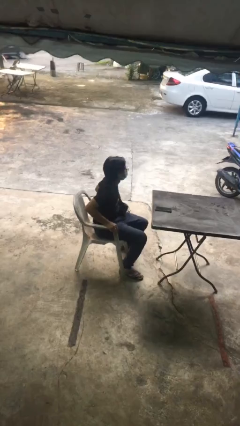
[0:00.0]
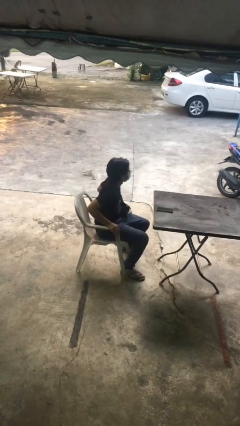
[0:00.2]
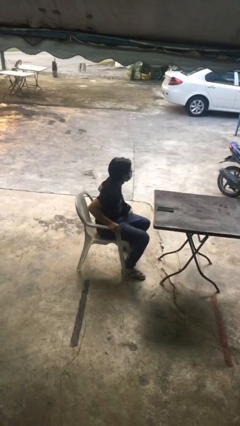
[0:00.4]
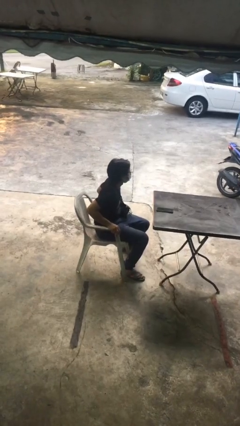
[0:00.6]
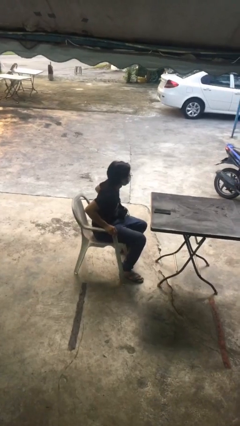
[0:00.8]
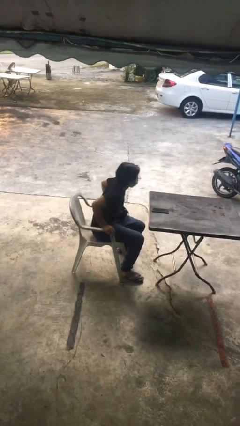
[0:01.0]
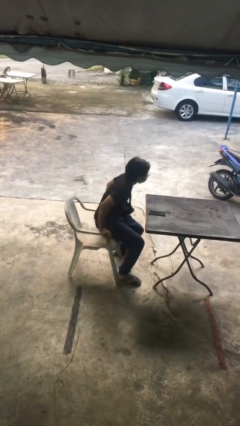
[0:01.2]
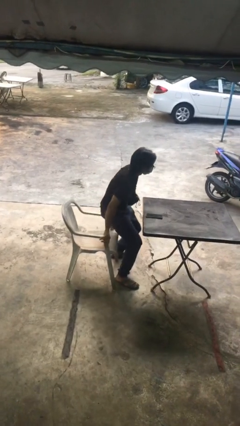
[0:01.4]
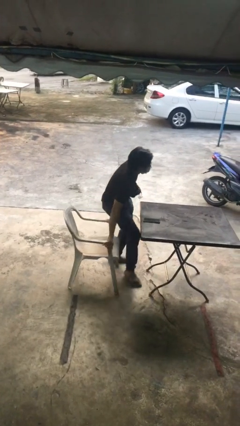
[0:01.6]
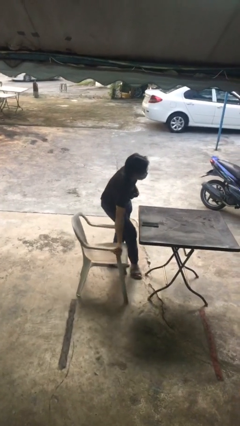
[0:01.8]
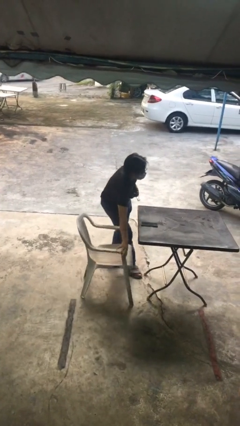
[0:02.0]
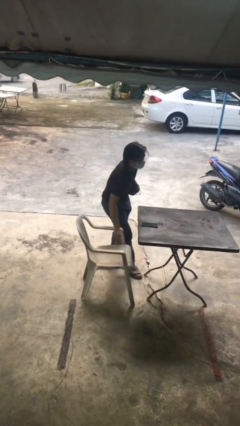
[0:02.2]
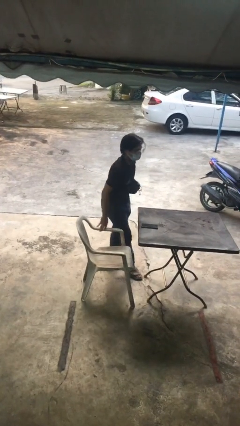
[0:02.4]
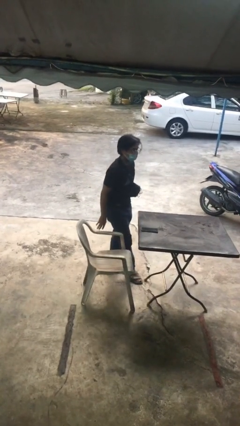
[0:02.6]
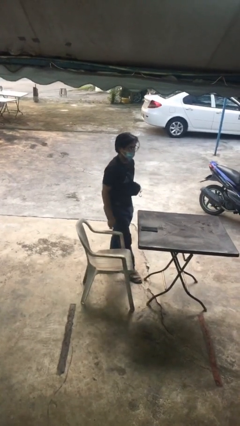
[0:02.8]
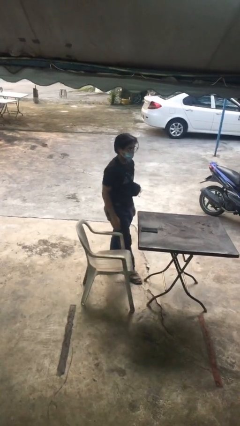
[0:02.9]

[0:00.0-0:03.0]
person stands up

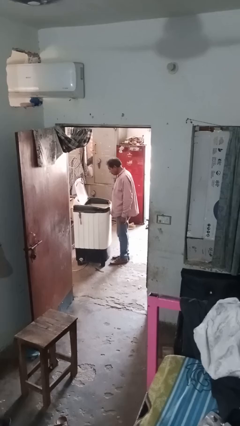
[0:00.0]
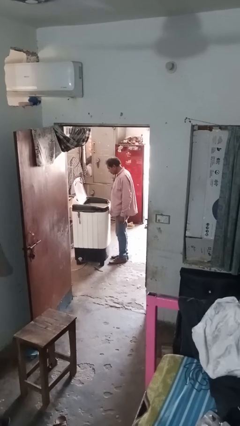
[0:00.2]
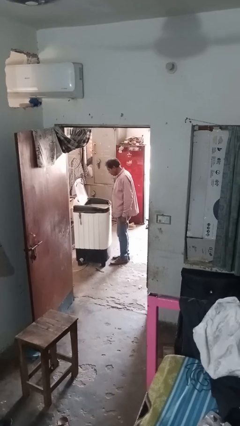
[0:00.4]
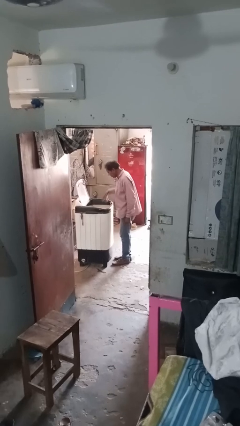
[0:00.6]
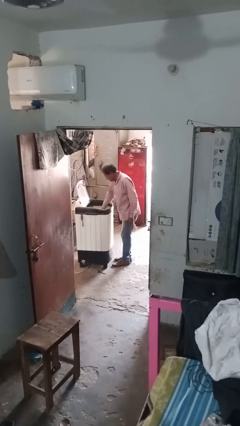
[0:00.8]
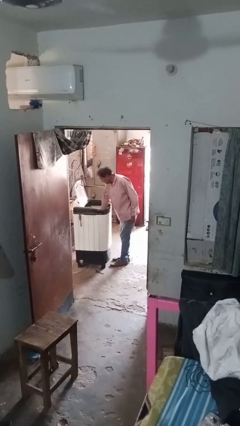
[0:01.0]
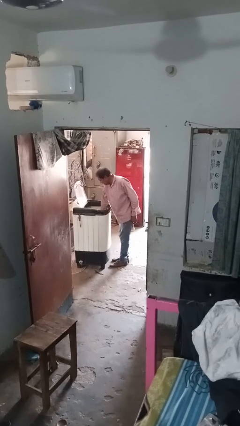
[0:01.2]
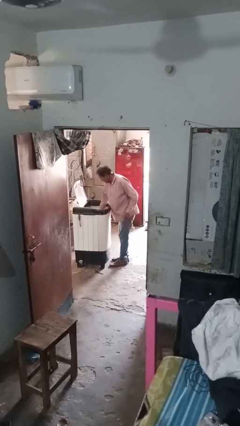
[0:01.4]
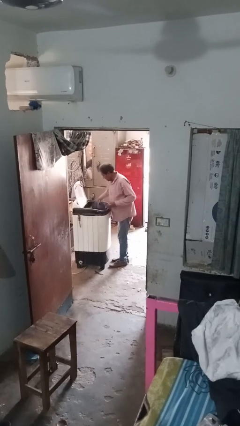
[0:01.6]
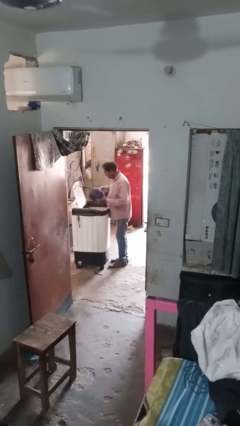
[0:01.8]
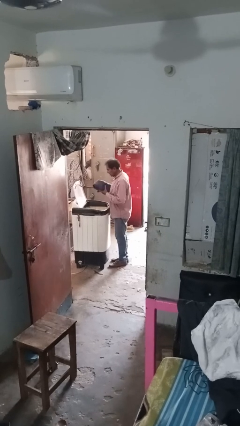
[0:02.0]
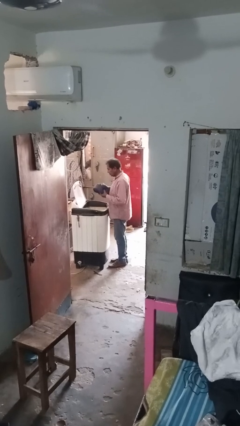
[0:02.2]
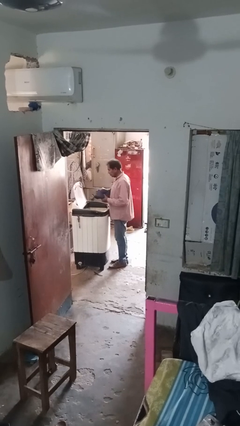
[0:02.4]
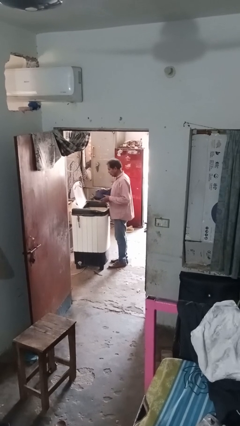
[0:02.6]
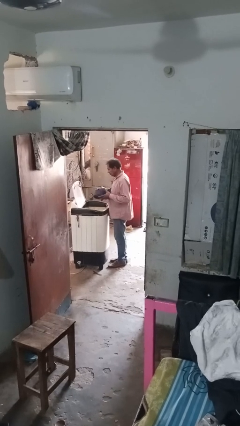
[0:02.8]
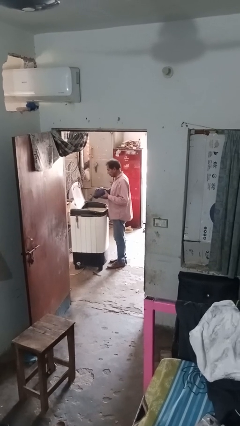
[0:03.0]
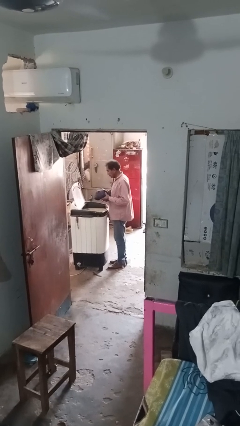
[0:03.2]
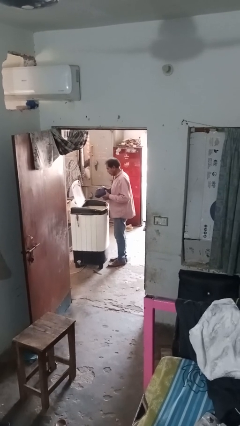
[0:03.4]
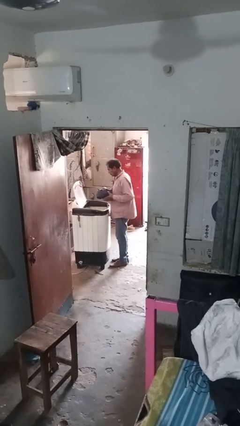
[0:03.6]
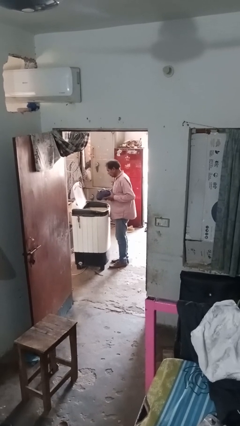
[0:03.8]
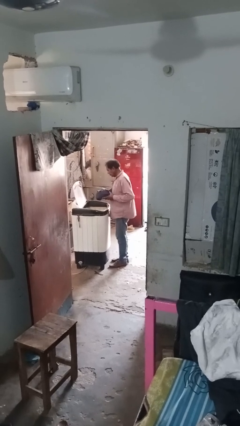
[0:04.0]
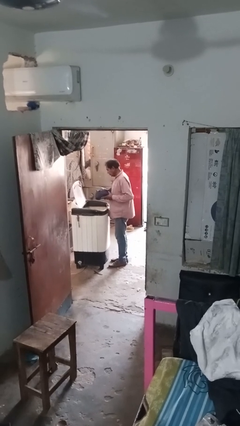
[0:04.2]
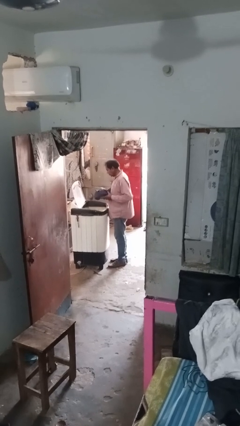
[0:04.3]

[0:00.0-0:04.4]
person unloads clotheswasher

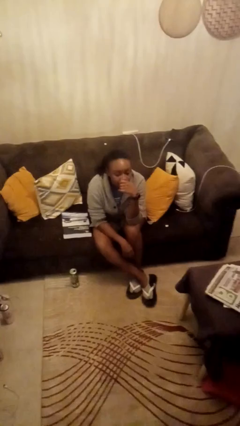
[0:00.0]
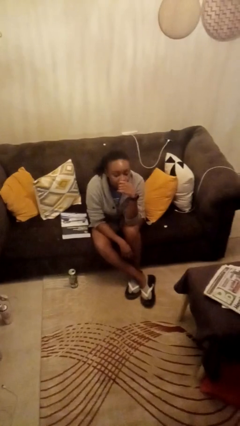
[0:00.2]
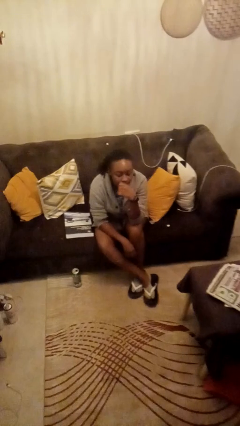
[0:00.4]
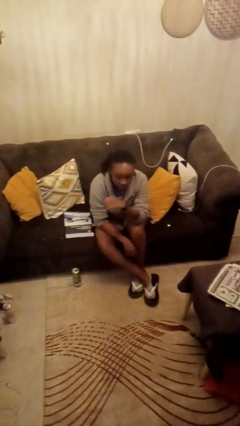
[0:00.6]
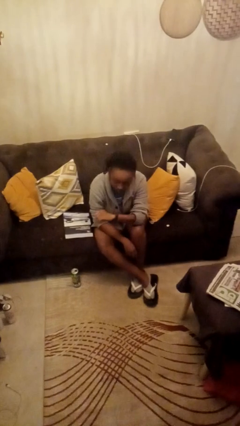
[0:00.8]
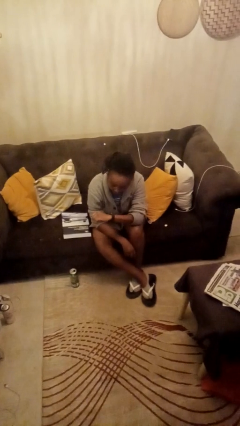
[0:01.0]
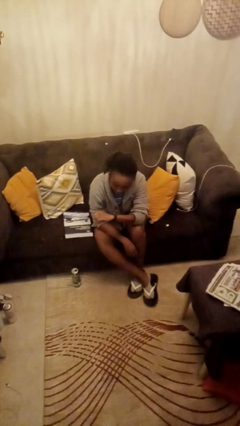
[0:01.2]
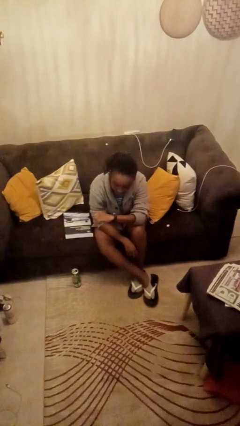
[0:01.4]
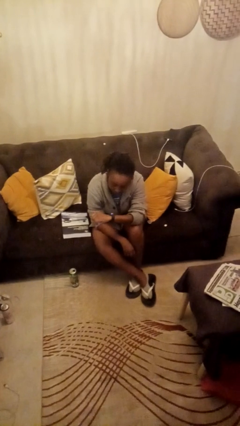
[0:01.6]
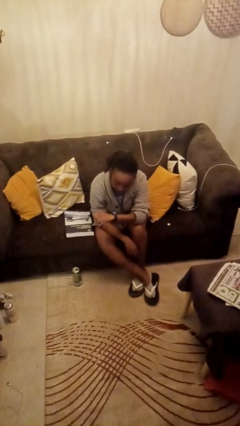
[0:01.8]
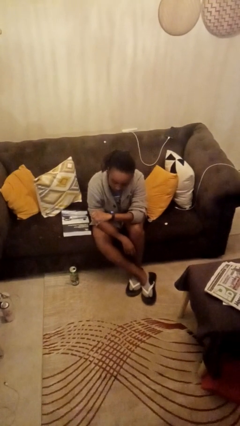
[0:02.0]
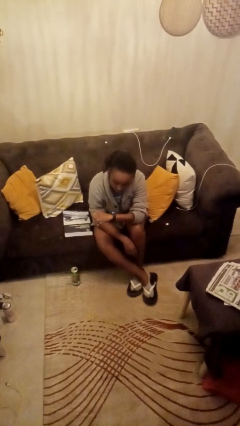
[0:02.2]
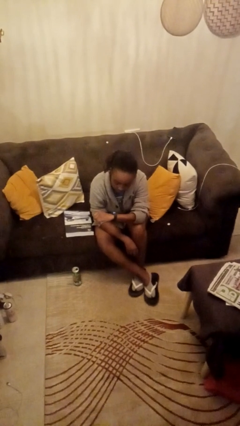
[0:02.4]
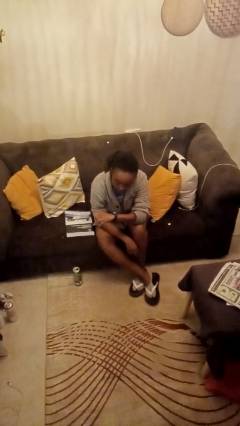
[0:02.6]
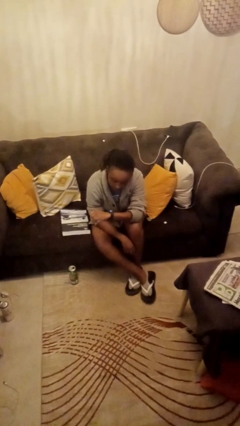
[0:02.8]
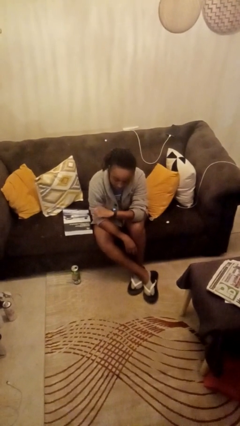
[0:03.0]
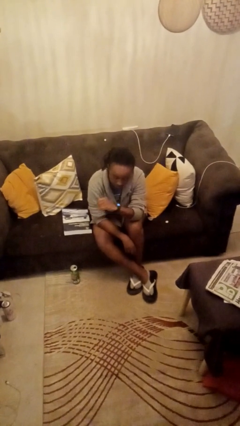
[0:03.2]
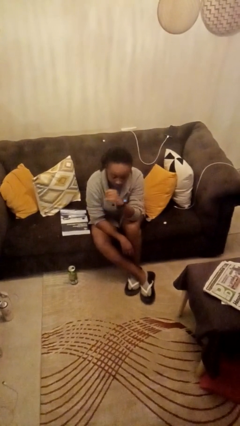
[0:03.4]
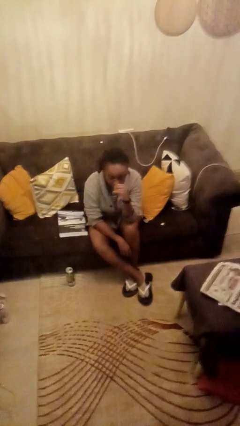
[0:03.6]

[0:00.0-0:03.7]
person looks at wristwatch

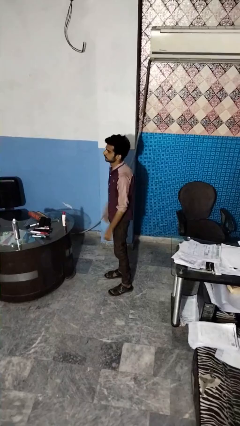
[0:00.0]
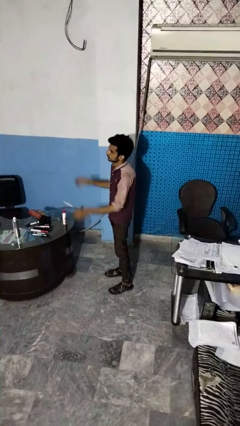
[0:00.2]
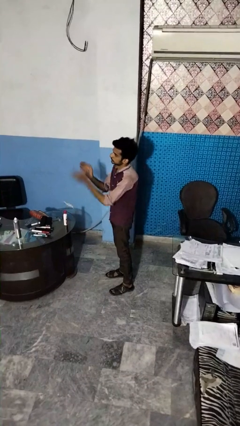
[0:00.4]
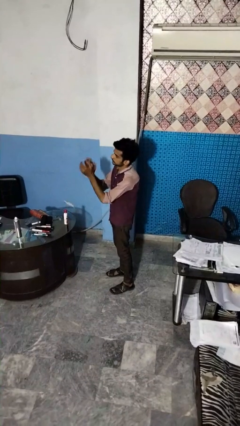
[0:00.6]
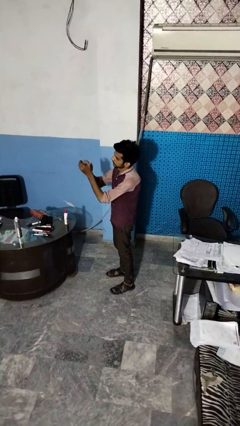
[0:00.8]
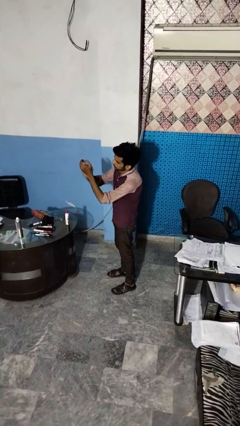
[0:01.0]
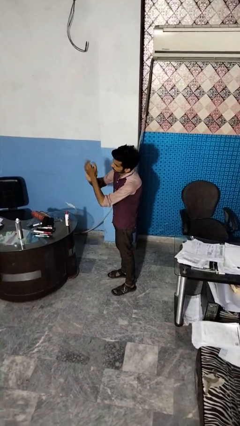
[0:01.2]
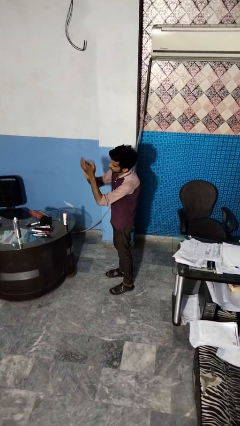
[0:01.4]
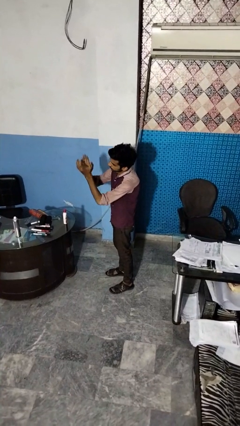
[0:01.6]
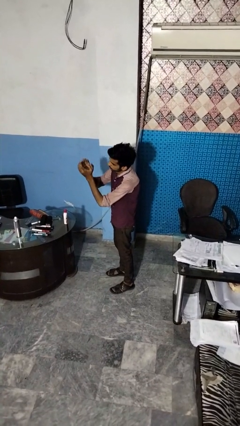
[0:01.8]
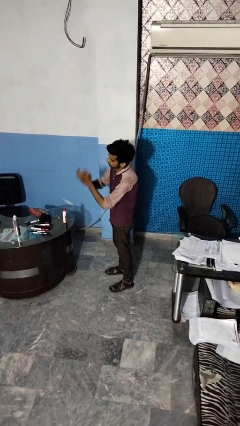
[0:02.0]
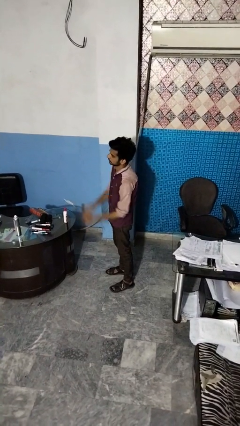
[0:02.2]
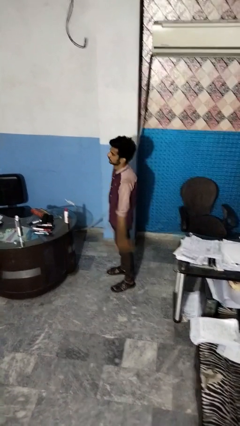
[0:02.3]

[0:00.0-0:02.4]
person claps hands

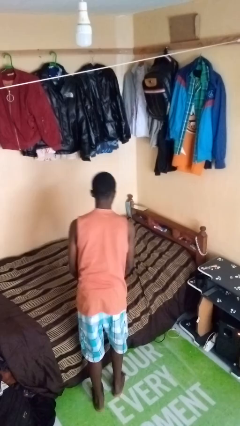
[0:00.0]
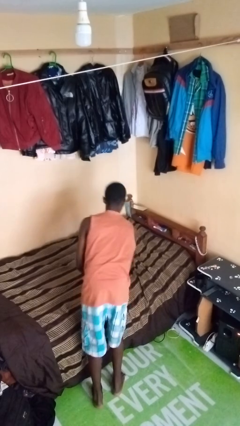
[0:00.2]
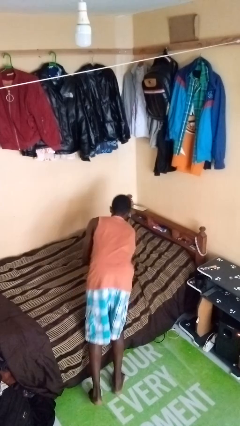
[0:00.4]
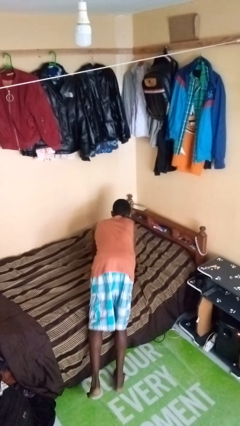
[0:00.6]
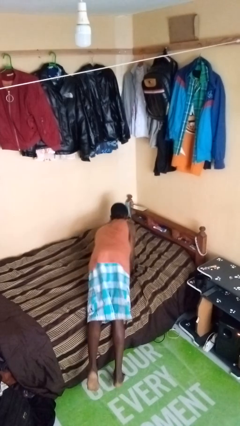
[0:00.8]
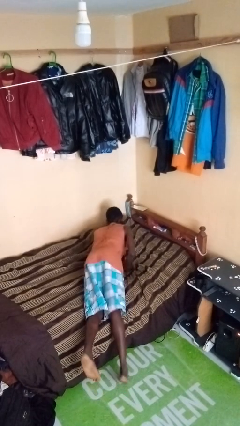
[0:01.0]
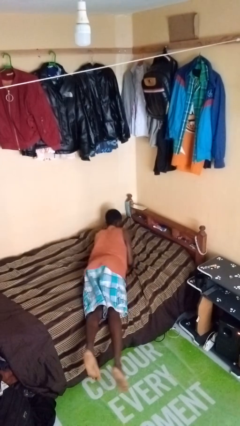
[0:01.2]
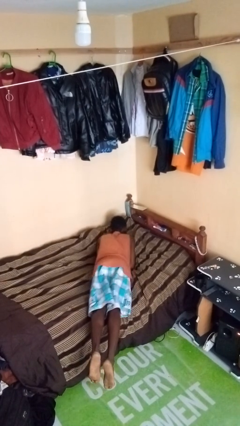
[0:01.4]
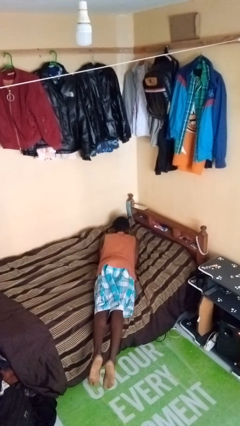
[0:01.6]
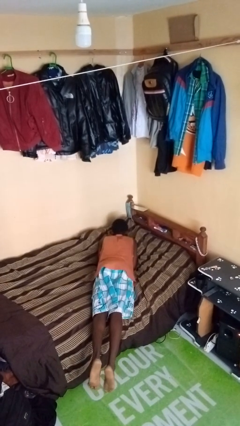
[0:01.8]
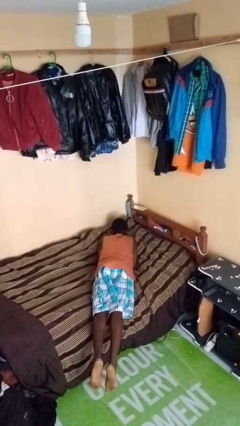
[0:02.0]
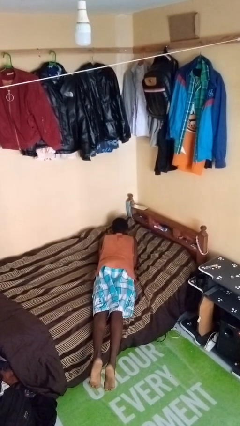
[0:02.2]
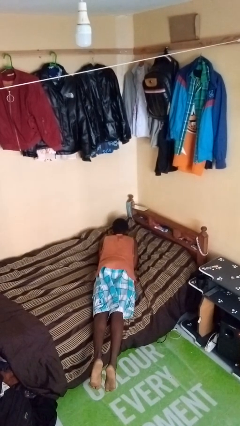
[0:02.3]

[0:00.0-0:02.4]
person lies down on bed

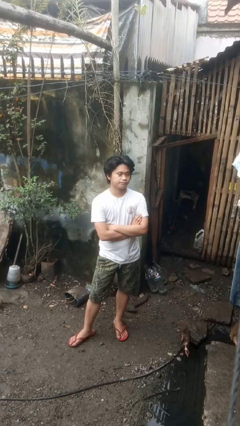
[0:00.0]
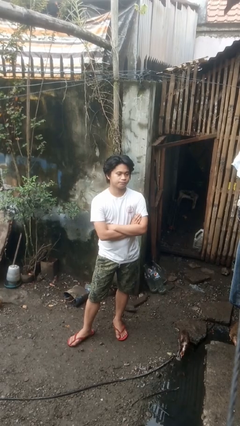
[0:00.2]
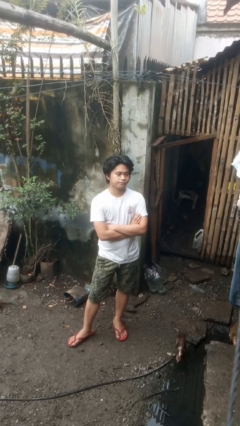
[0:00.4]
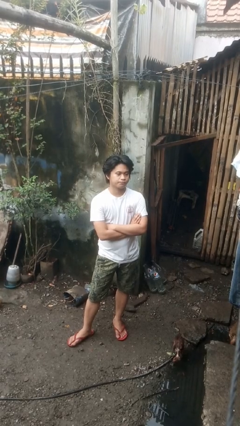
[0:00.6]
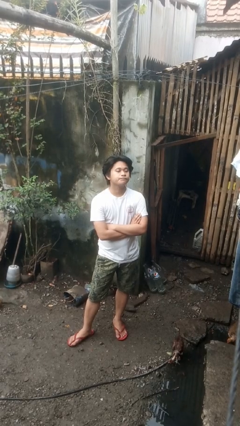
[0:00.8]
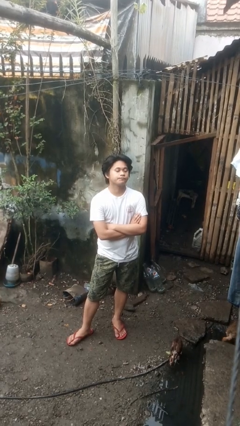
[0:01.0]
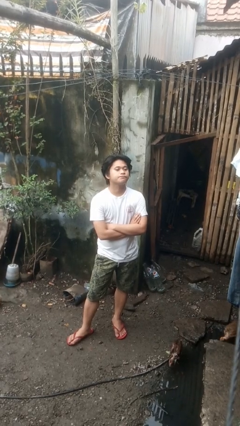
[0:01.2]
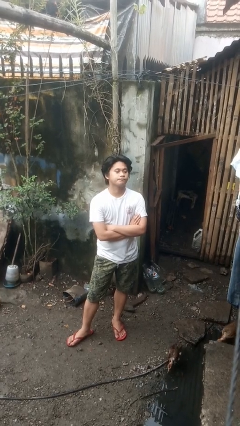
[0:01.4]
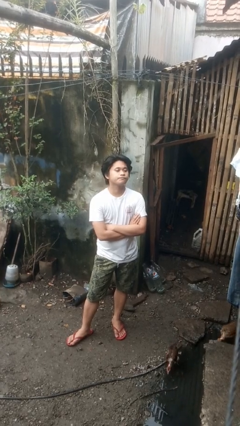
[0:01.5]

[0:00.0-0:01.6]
person nods head

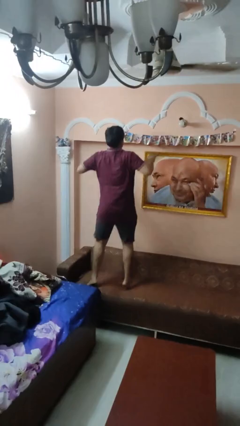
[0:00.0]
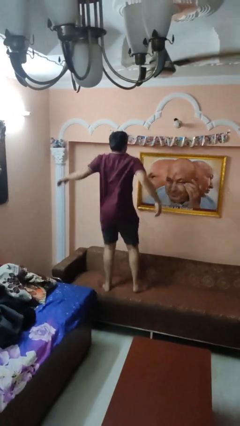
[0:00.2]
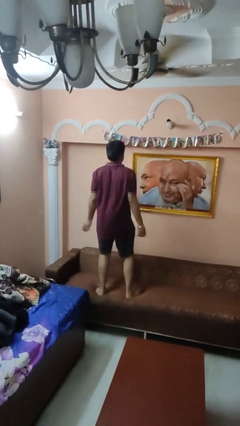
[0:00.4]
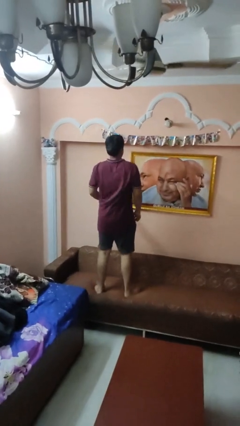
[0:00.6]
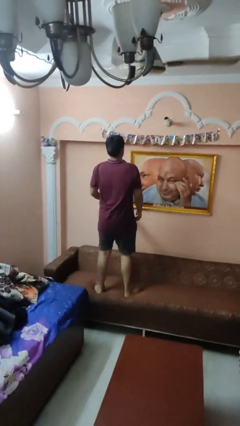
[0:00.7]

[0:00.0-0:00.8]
person jumps on couch
